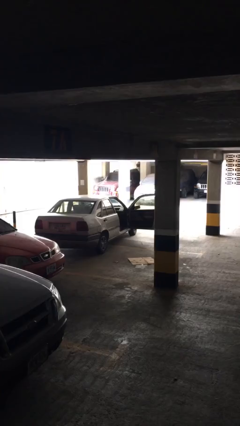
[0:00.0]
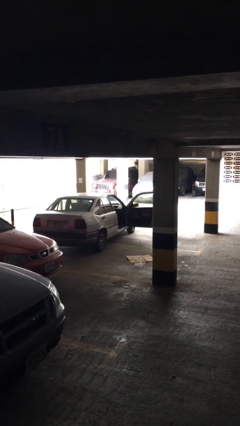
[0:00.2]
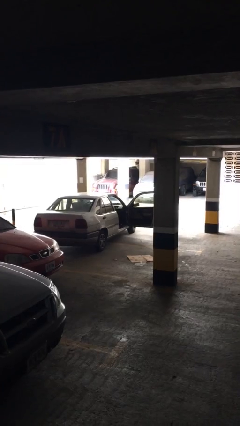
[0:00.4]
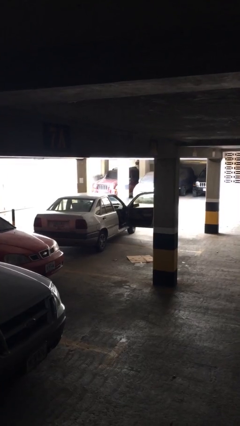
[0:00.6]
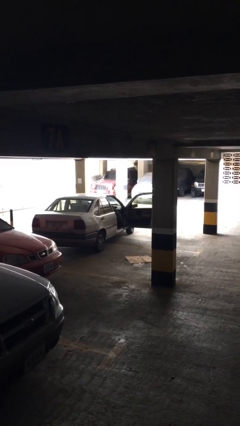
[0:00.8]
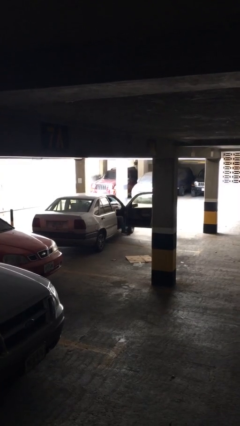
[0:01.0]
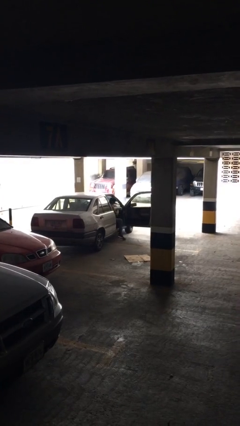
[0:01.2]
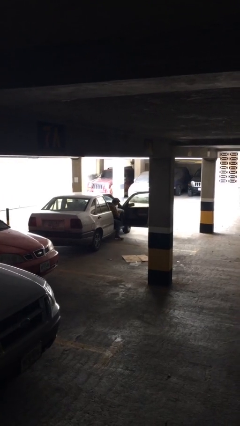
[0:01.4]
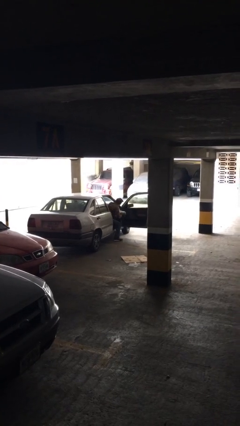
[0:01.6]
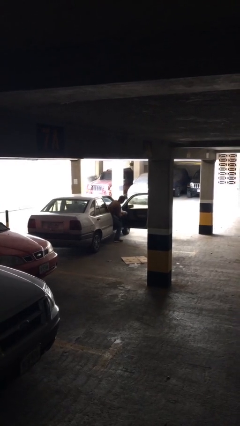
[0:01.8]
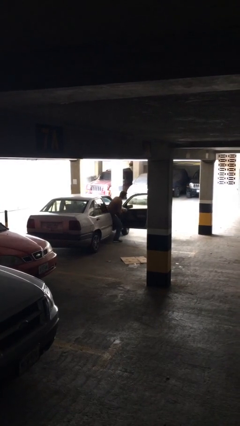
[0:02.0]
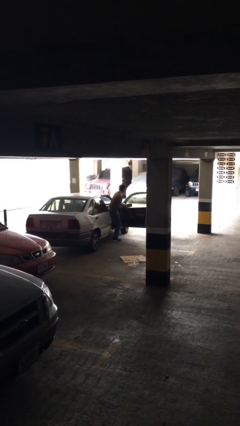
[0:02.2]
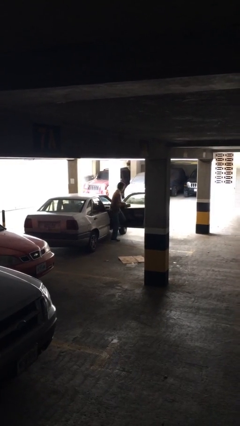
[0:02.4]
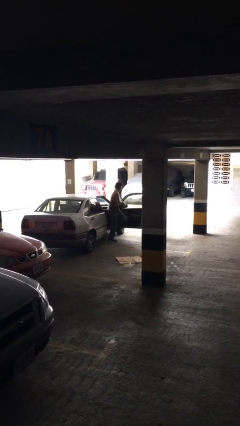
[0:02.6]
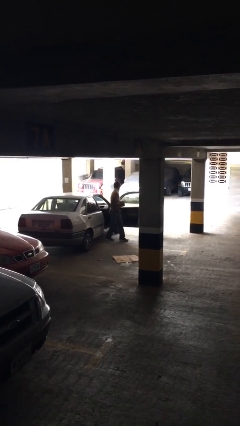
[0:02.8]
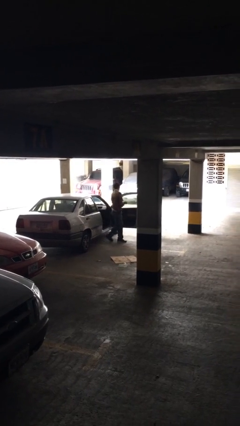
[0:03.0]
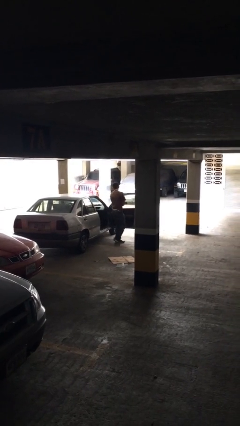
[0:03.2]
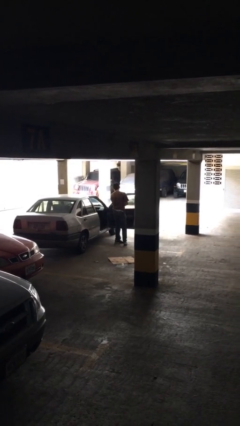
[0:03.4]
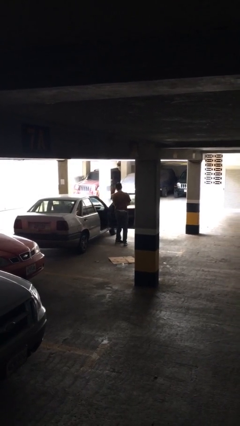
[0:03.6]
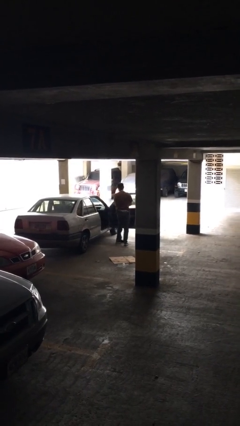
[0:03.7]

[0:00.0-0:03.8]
person exits car

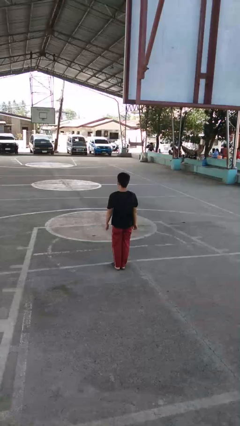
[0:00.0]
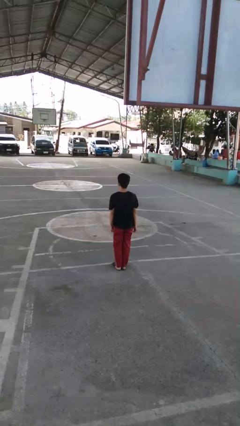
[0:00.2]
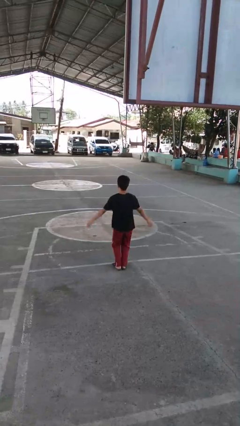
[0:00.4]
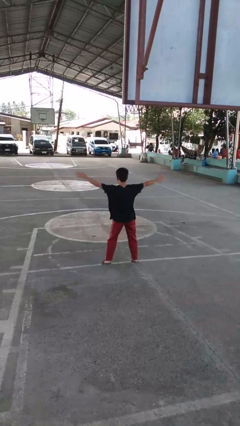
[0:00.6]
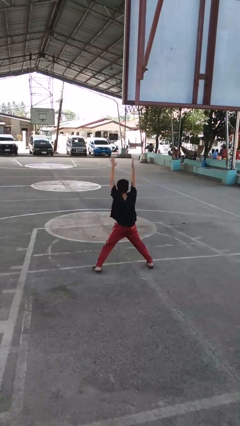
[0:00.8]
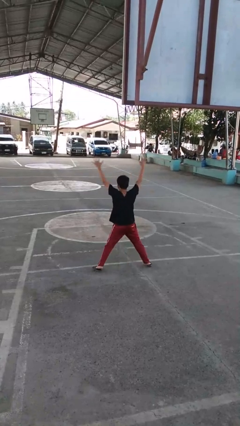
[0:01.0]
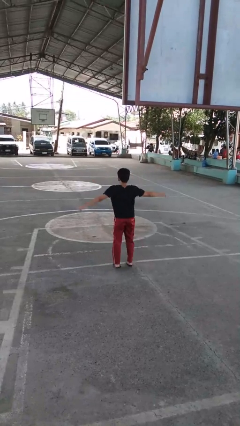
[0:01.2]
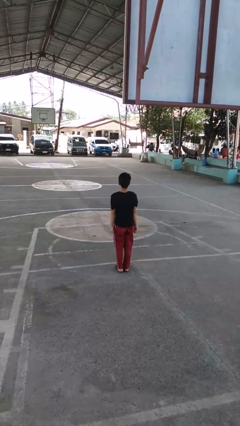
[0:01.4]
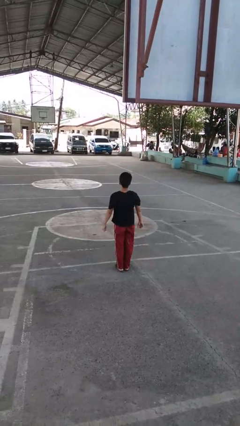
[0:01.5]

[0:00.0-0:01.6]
person exercises with jumping jacks

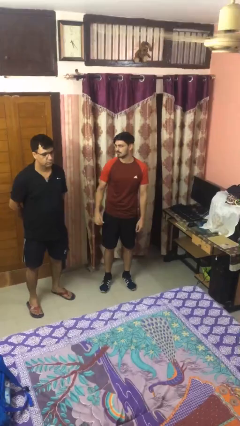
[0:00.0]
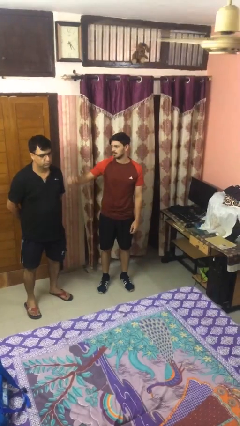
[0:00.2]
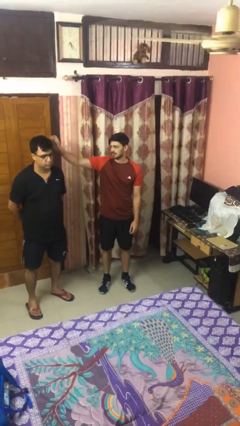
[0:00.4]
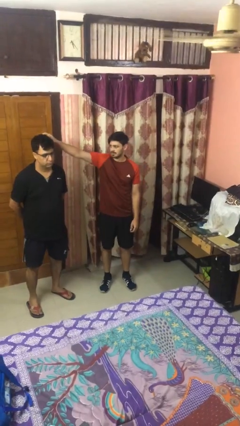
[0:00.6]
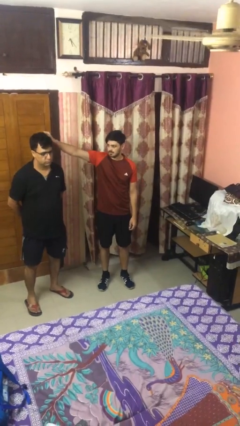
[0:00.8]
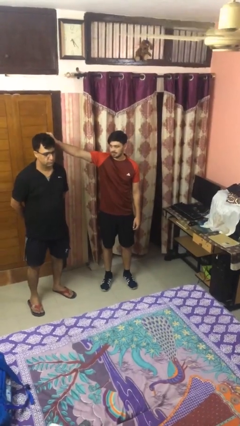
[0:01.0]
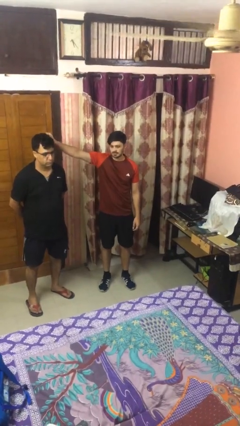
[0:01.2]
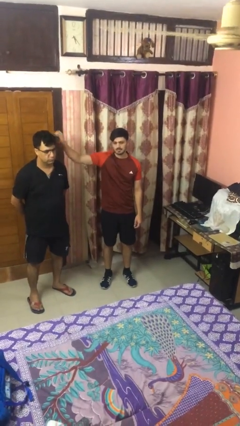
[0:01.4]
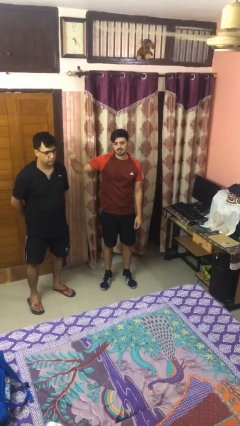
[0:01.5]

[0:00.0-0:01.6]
person grabs person by hair

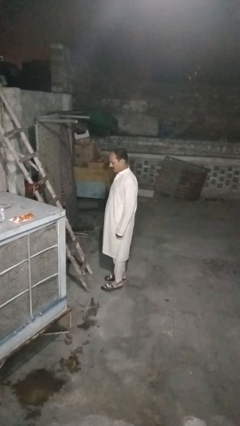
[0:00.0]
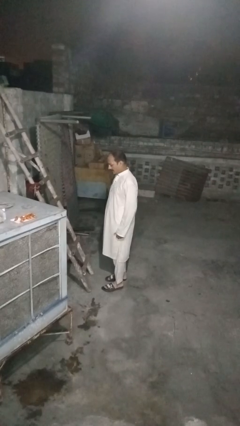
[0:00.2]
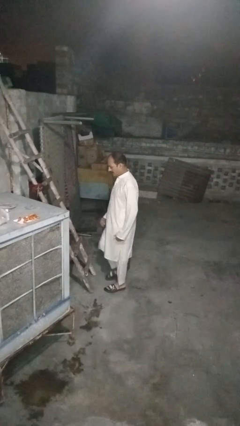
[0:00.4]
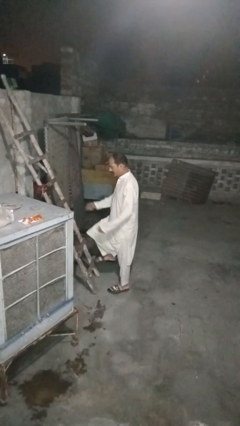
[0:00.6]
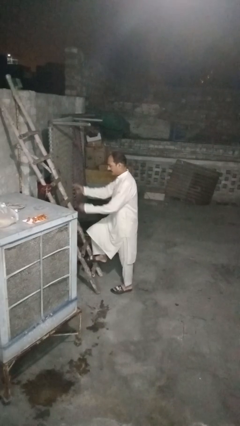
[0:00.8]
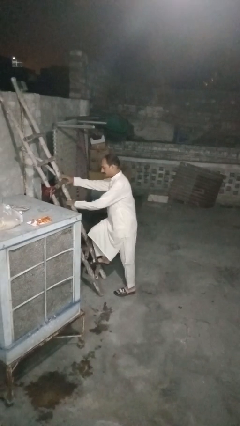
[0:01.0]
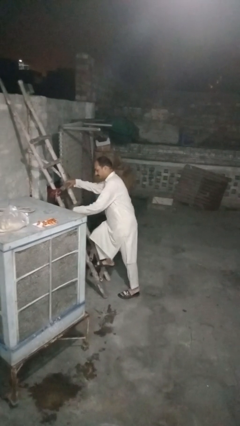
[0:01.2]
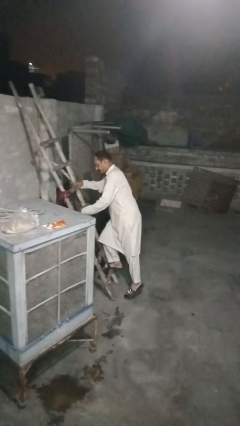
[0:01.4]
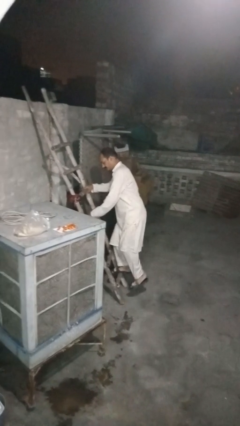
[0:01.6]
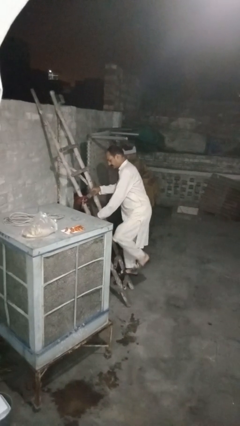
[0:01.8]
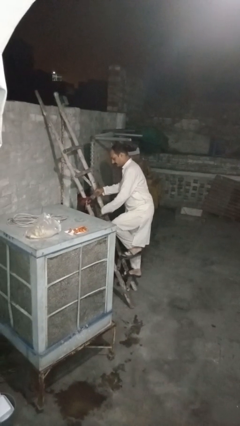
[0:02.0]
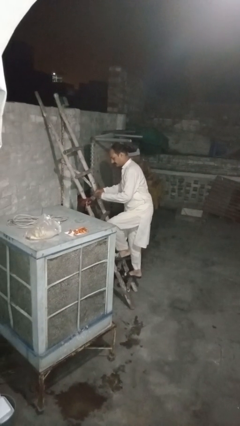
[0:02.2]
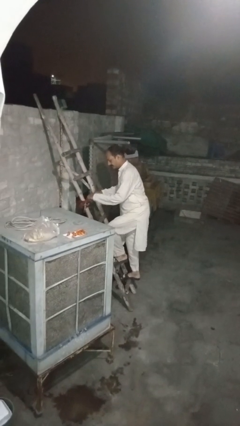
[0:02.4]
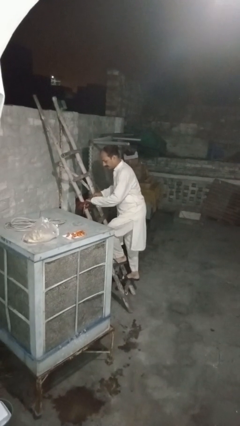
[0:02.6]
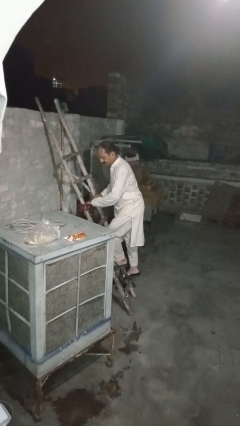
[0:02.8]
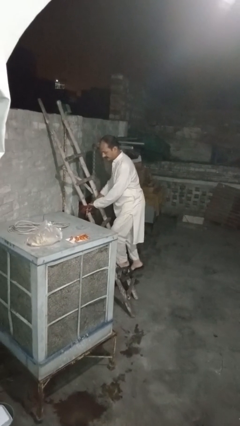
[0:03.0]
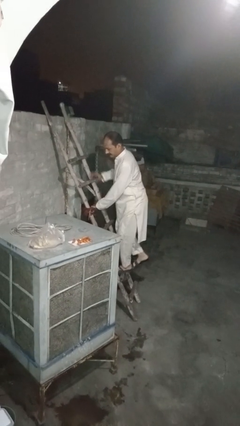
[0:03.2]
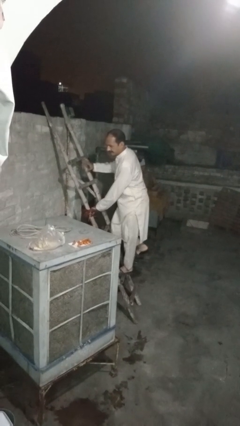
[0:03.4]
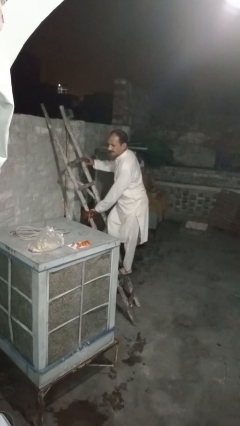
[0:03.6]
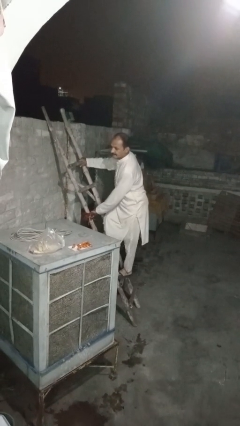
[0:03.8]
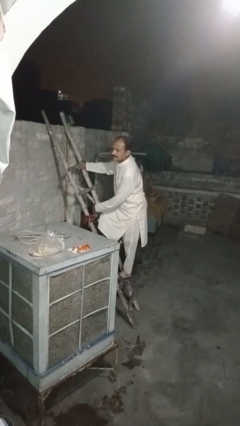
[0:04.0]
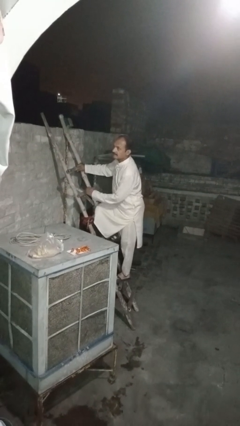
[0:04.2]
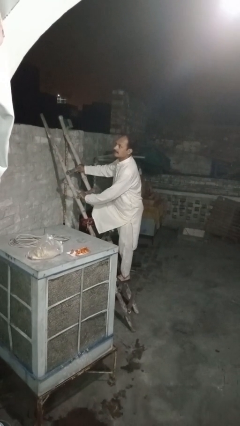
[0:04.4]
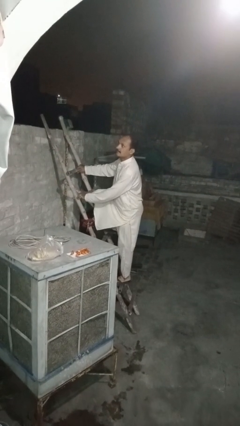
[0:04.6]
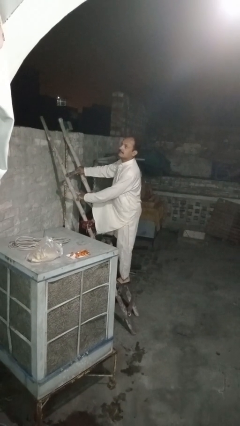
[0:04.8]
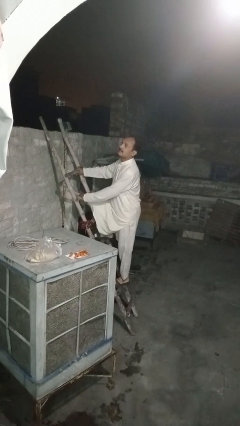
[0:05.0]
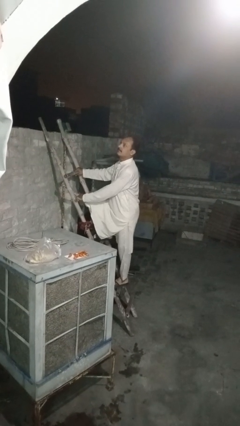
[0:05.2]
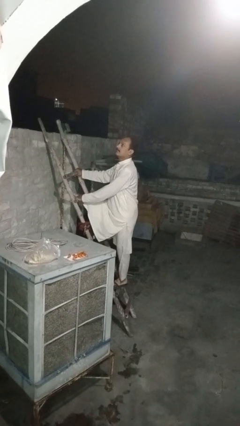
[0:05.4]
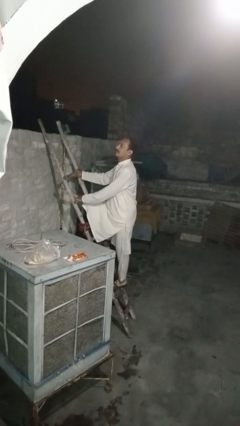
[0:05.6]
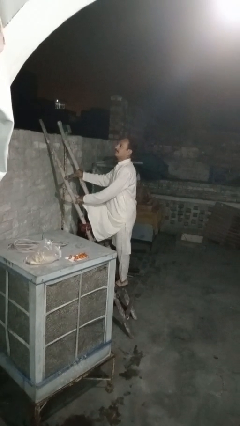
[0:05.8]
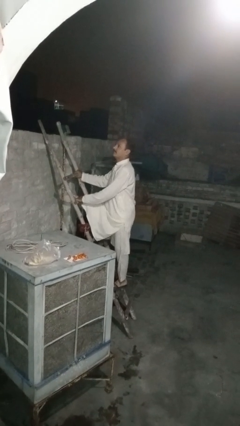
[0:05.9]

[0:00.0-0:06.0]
person climbs up ladder

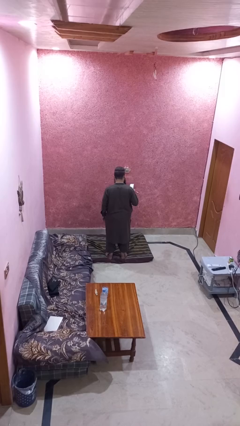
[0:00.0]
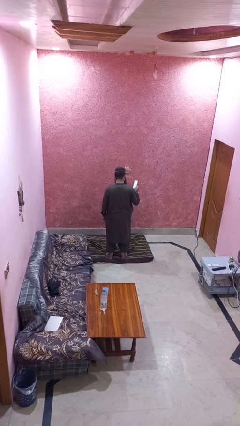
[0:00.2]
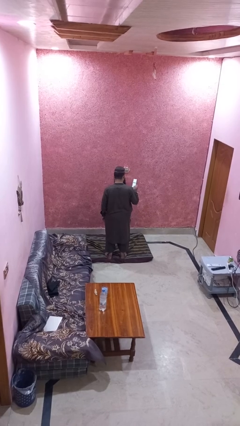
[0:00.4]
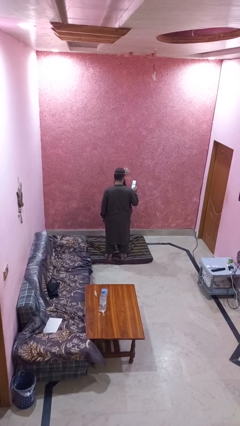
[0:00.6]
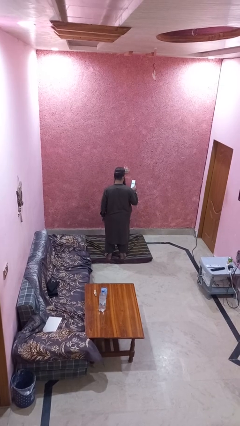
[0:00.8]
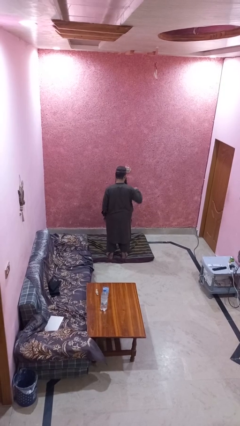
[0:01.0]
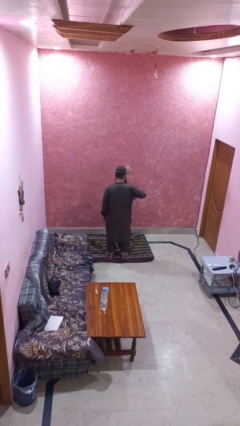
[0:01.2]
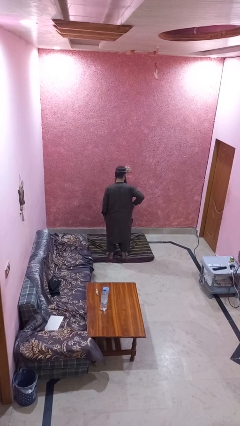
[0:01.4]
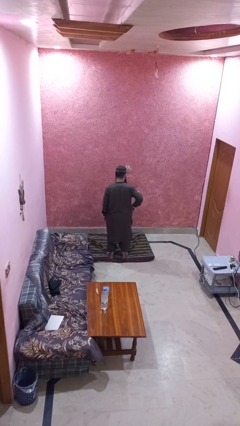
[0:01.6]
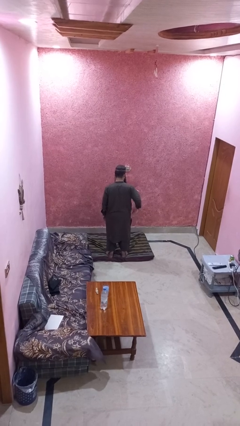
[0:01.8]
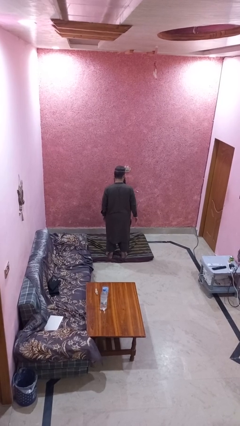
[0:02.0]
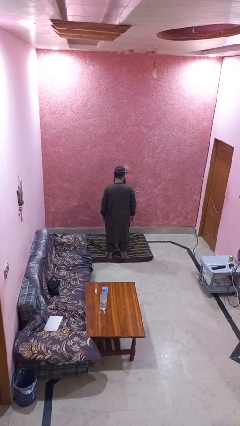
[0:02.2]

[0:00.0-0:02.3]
person puts phone into pocket

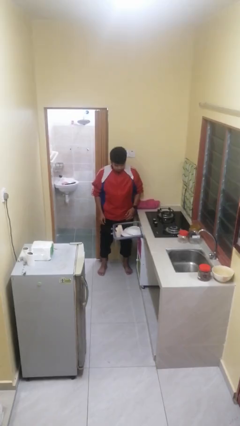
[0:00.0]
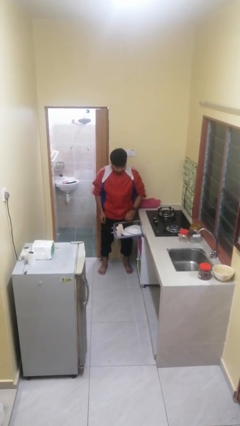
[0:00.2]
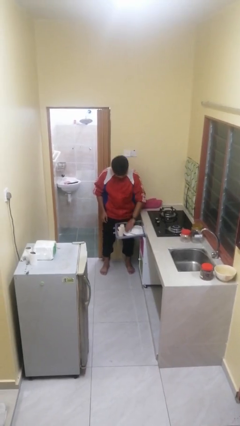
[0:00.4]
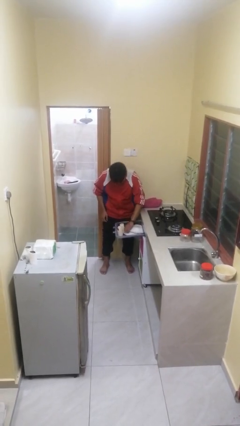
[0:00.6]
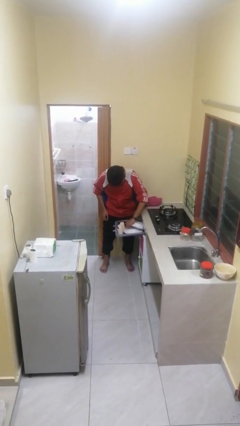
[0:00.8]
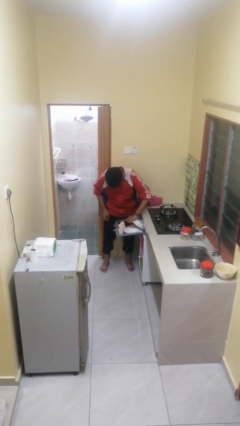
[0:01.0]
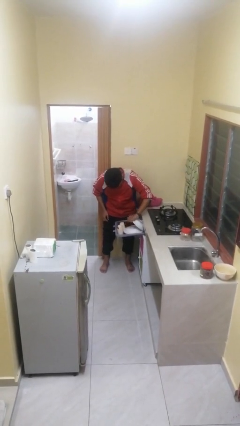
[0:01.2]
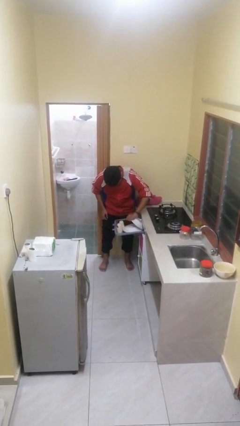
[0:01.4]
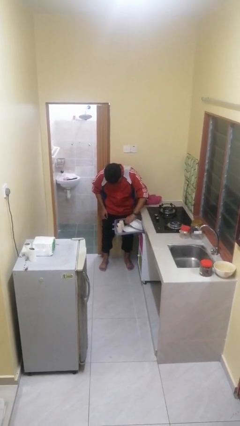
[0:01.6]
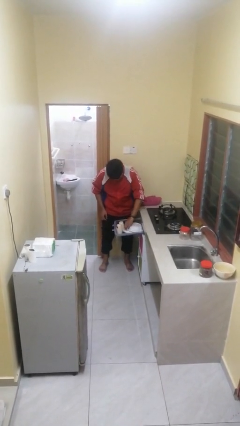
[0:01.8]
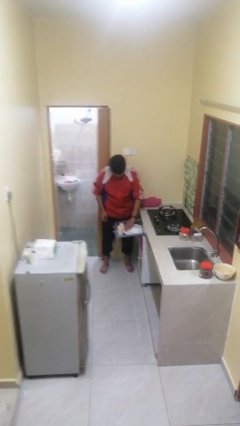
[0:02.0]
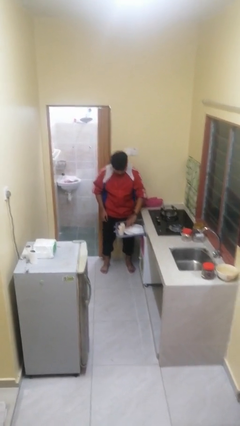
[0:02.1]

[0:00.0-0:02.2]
person searches in kitchen drawer
